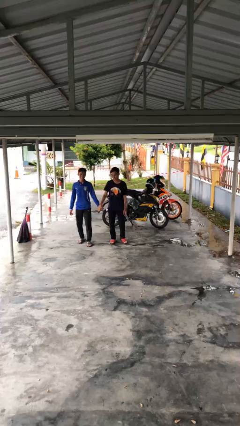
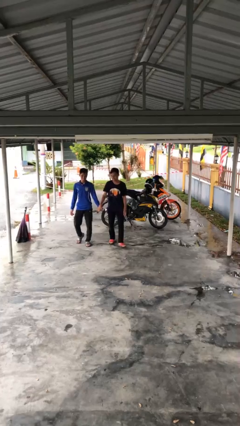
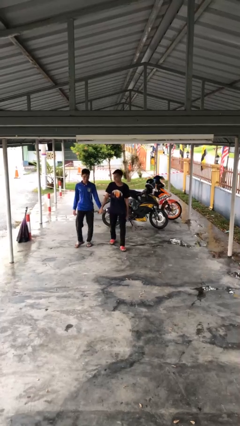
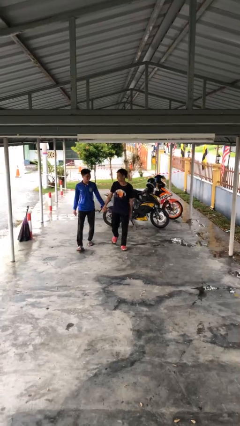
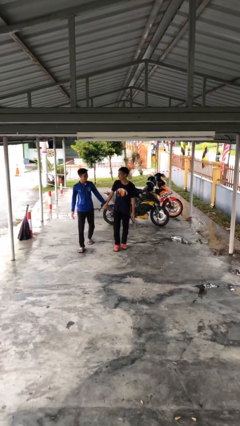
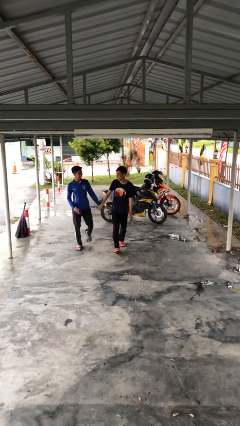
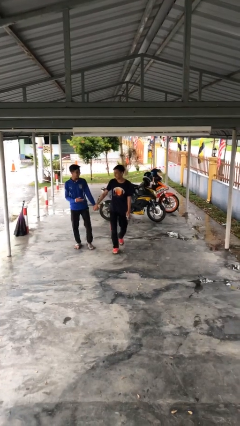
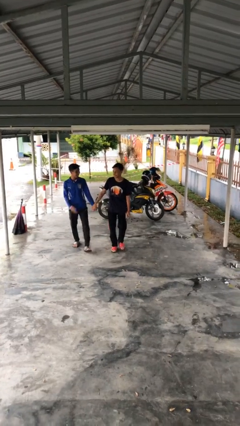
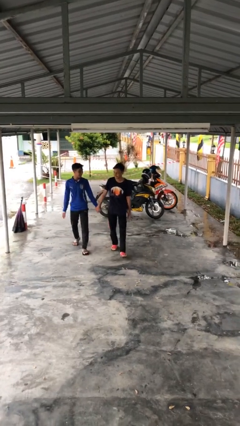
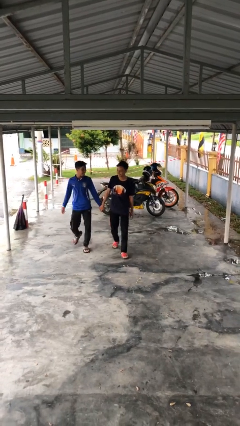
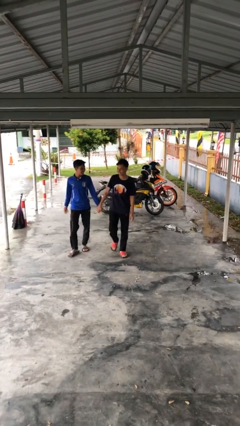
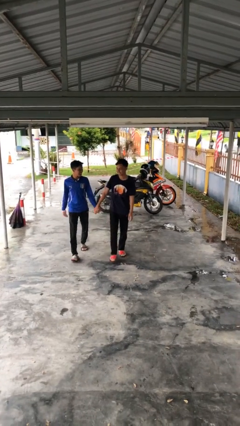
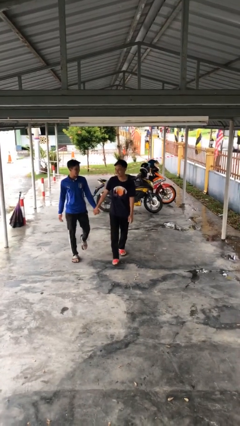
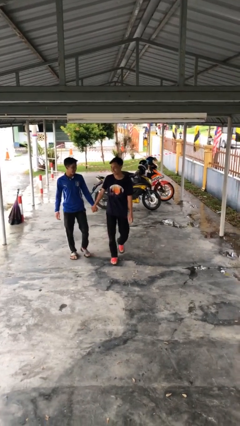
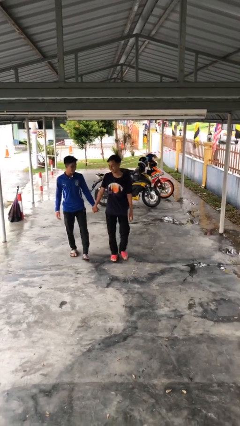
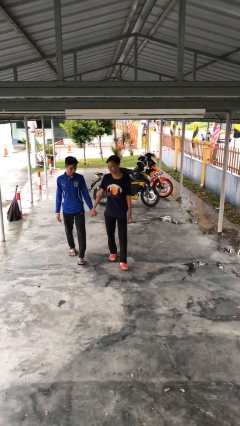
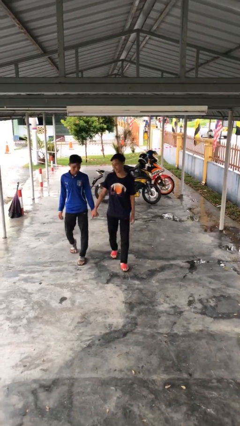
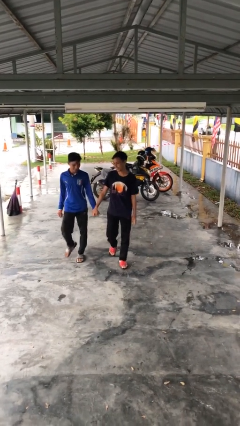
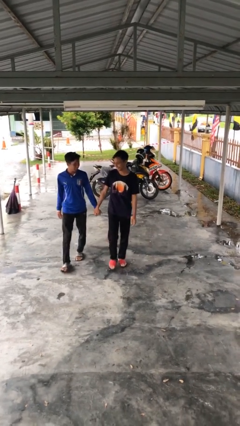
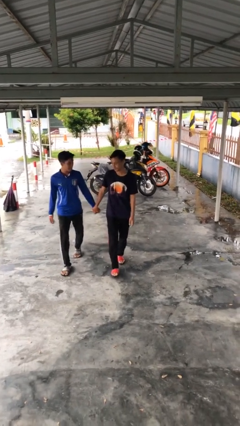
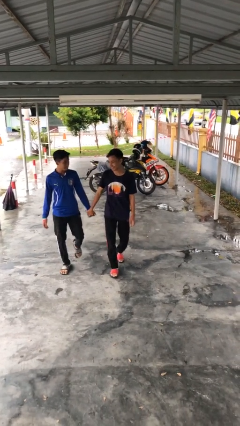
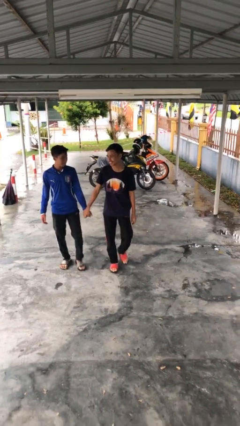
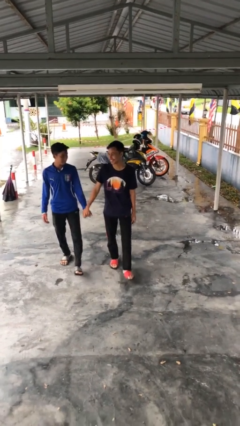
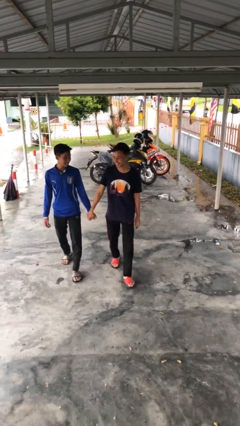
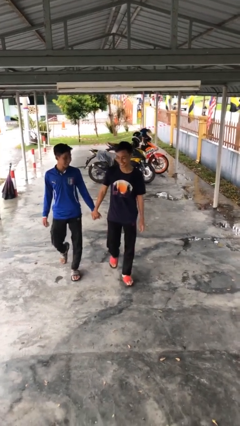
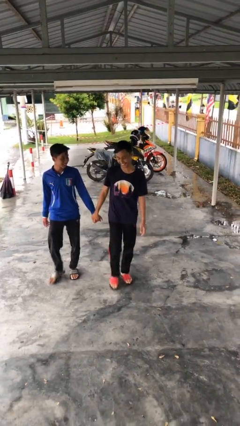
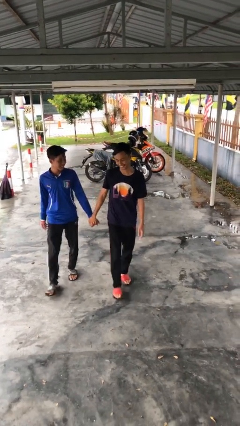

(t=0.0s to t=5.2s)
person holds hand

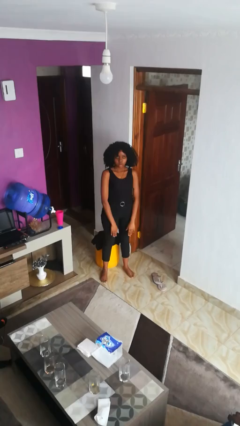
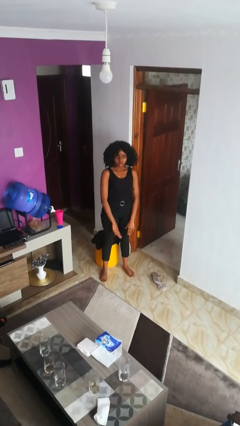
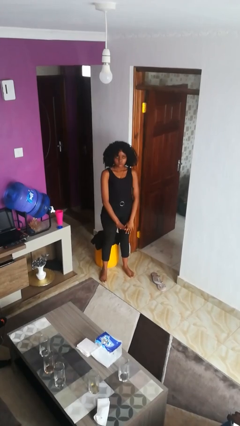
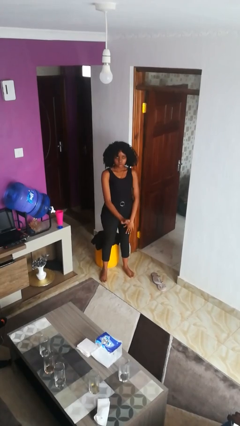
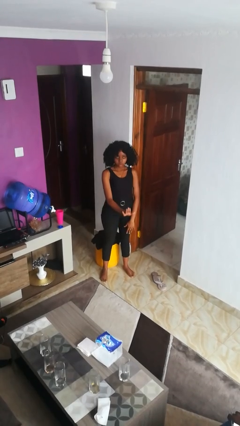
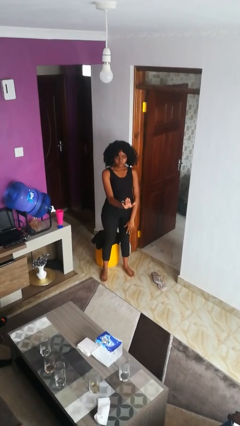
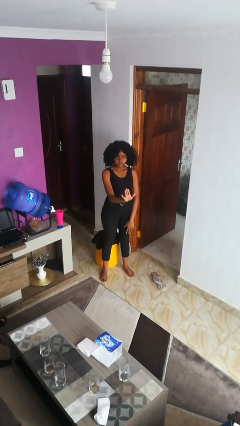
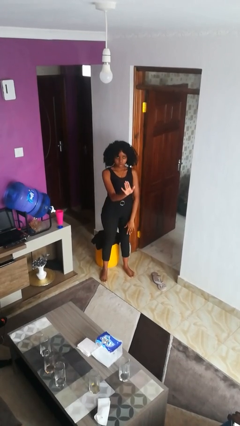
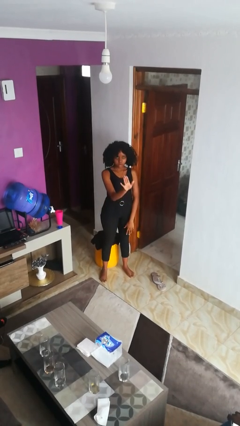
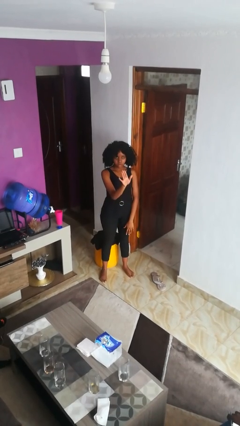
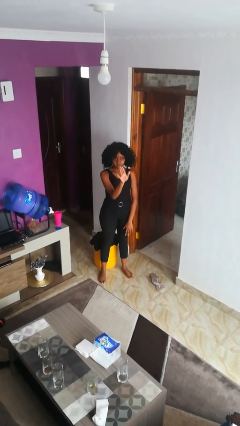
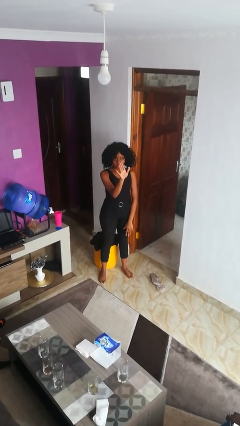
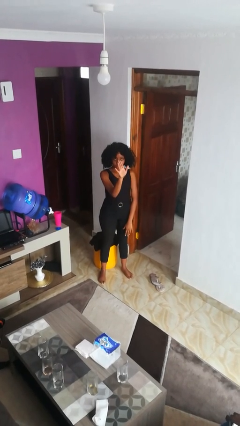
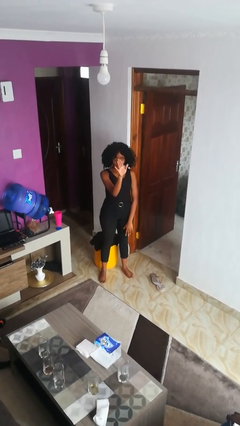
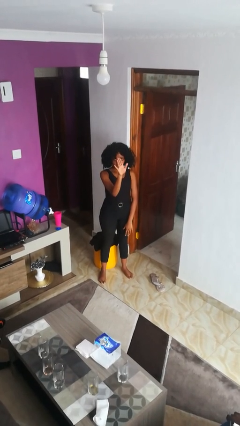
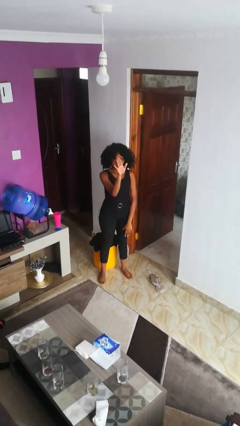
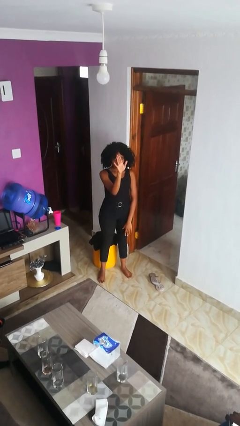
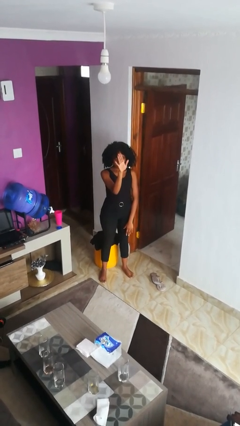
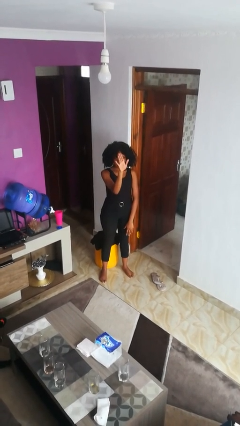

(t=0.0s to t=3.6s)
person gestures swipe up

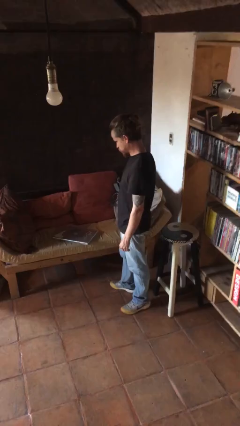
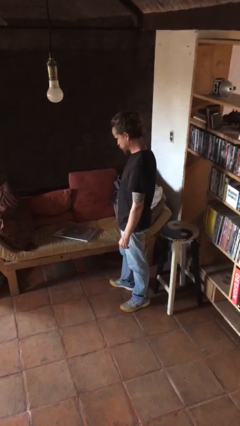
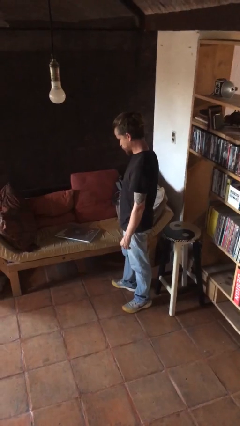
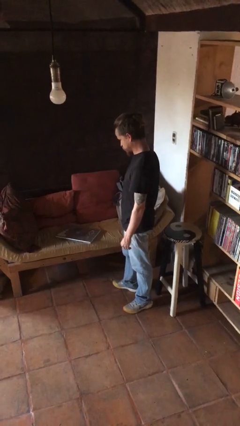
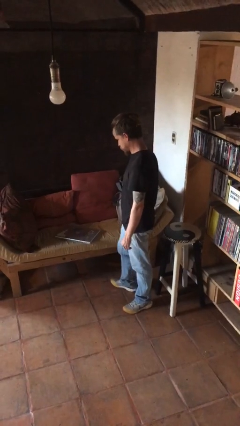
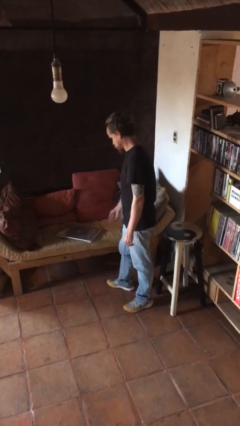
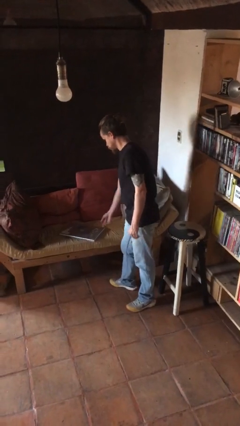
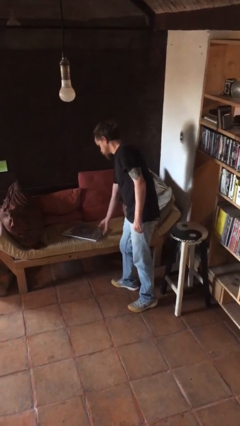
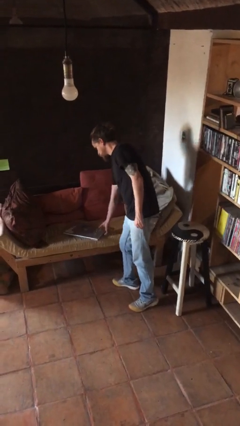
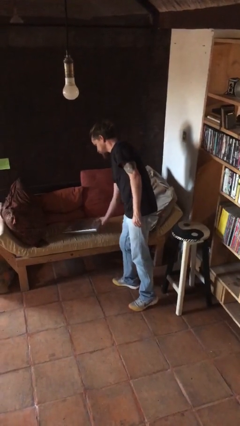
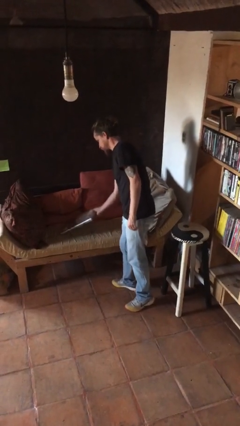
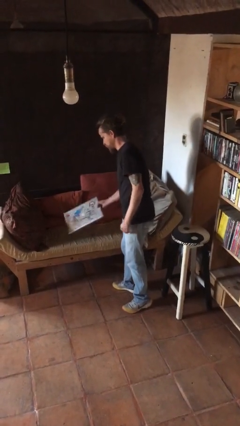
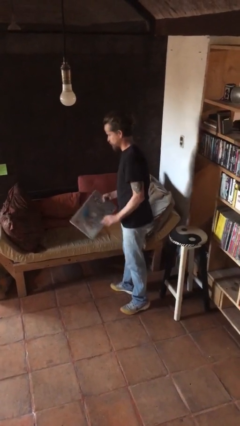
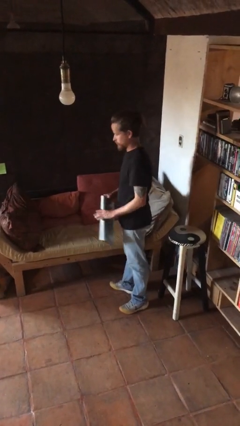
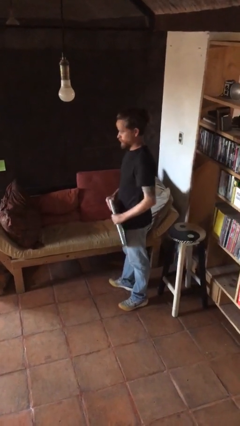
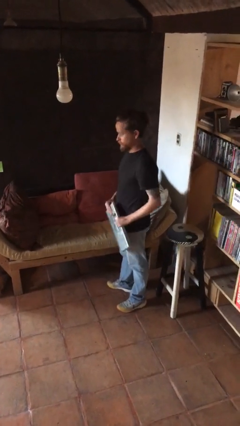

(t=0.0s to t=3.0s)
person picks up object from couch

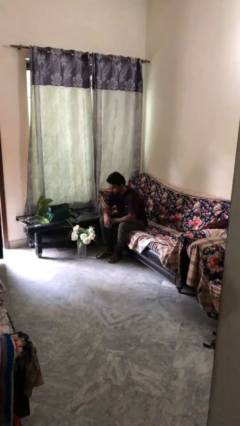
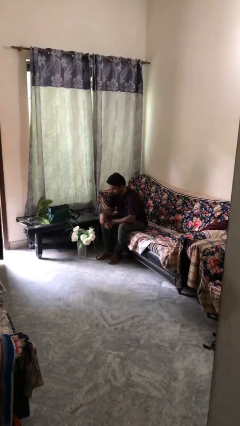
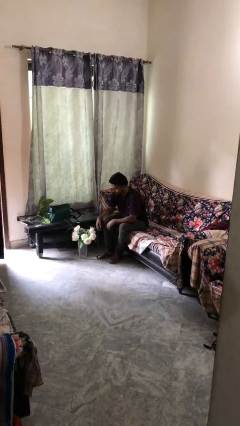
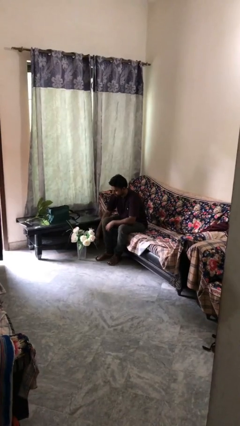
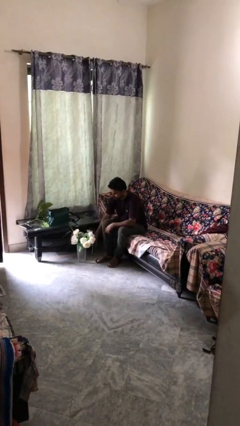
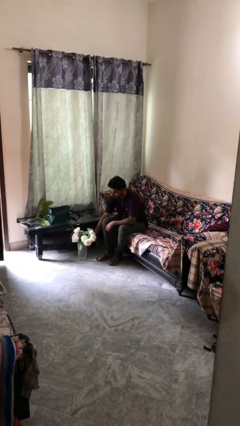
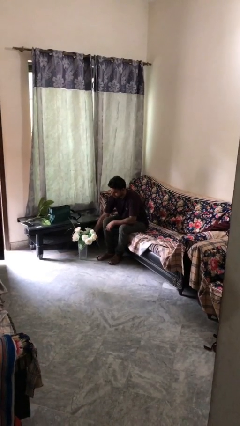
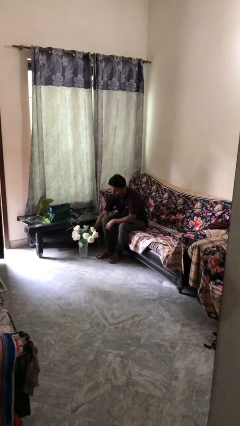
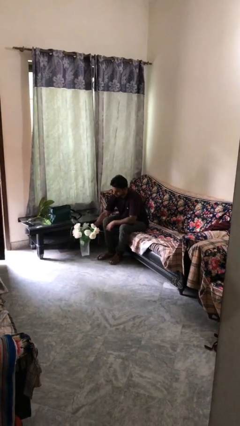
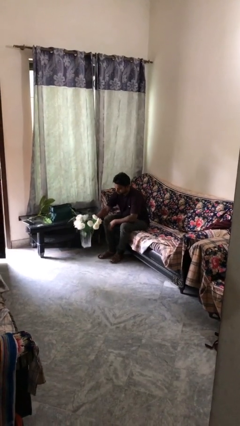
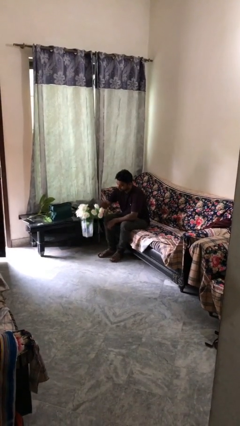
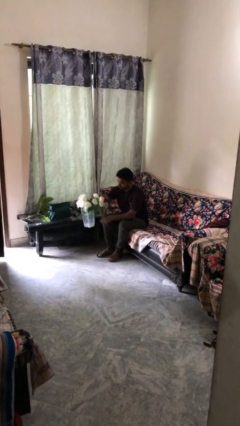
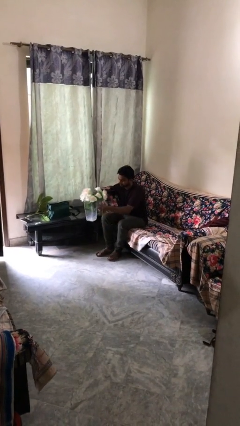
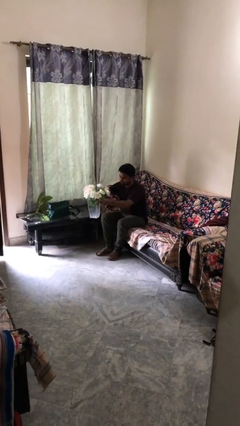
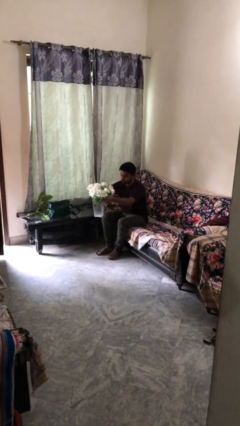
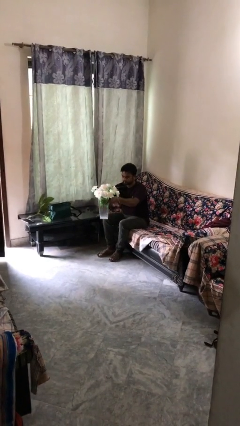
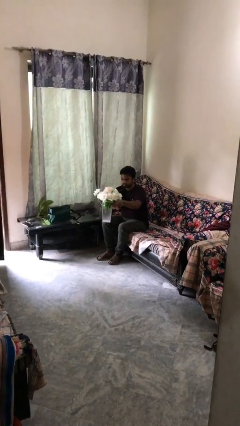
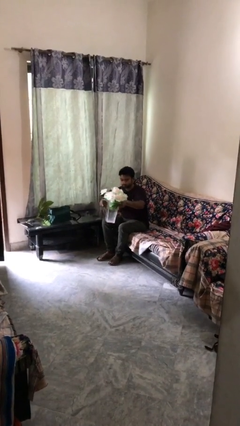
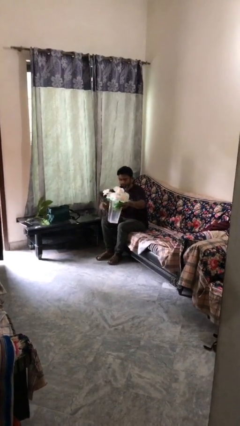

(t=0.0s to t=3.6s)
person picks up object from floor

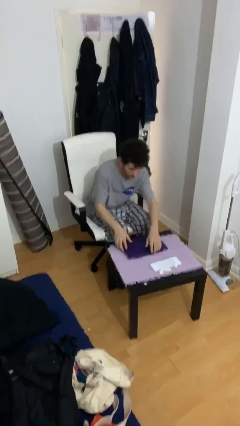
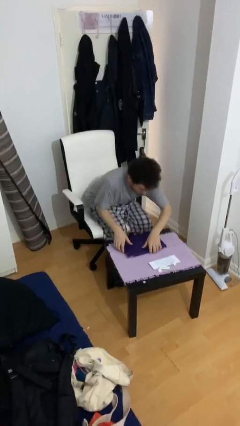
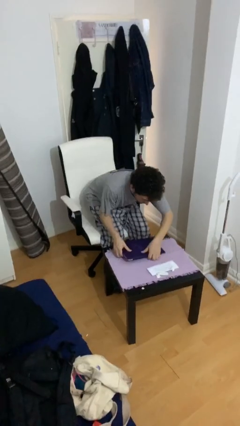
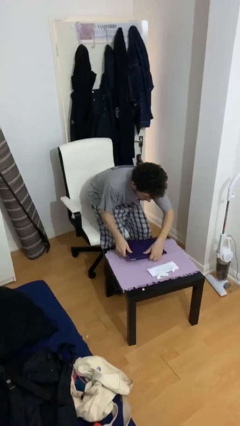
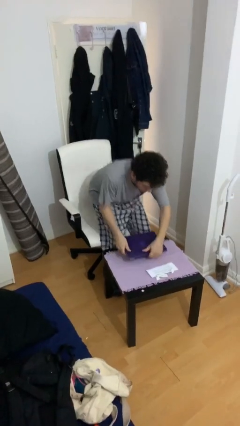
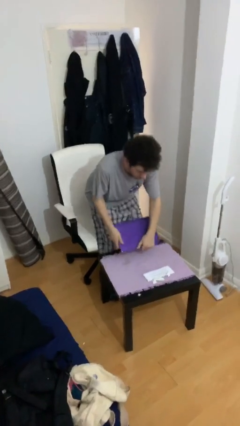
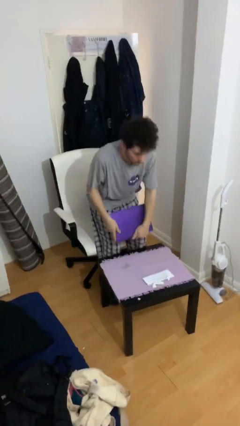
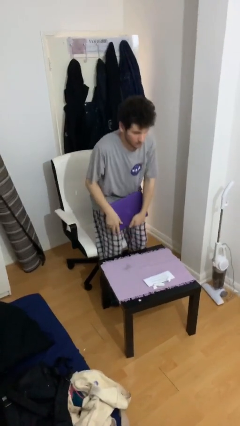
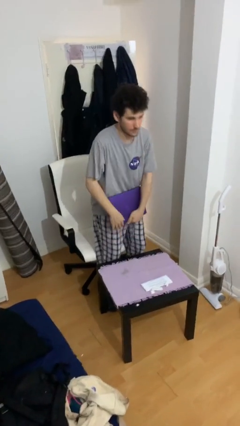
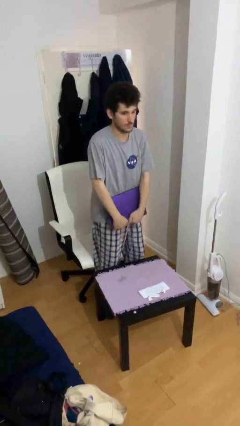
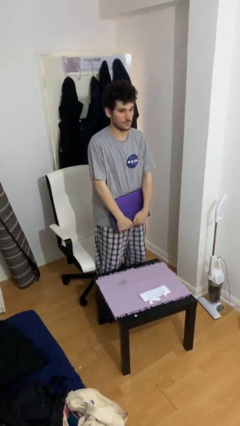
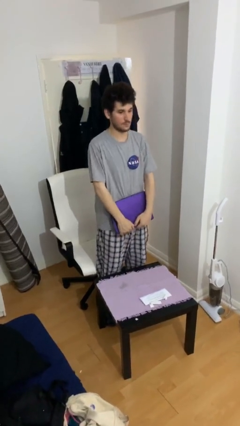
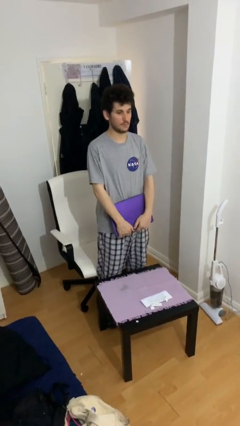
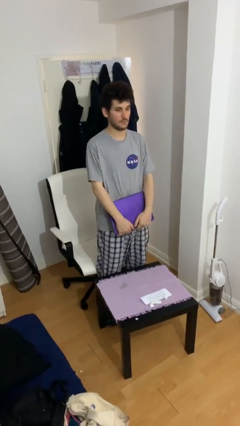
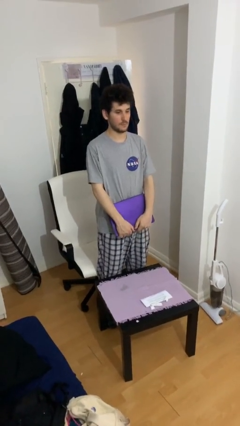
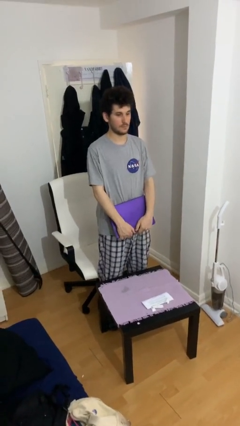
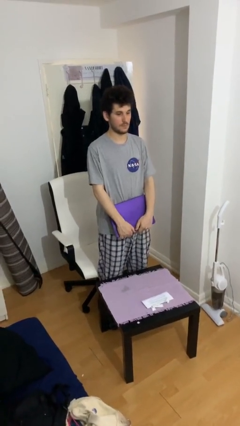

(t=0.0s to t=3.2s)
person stands up
